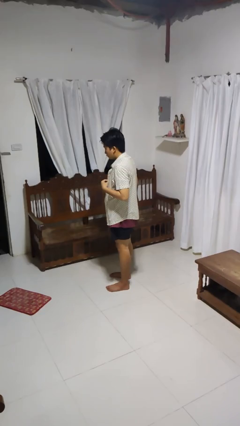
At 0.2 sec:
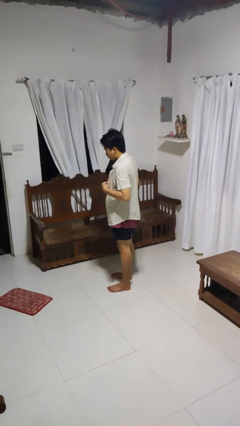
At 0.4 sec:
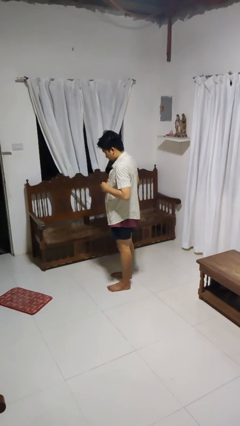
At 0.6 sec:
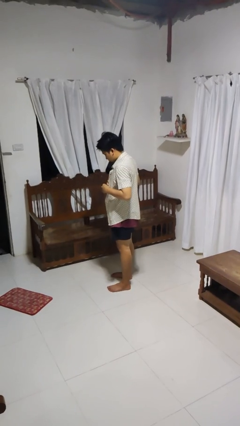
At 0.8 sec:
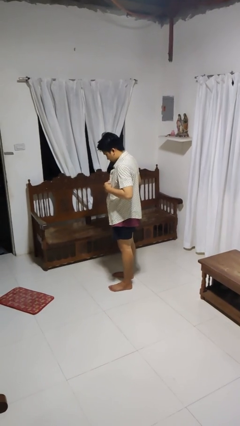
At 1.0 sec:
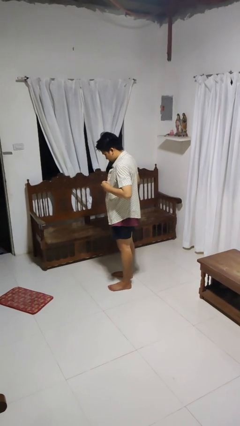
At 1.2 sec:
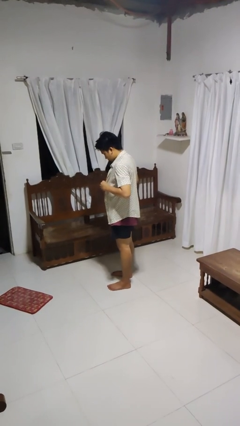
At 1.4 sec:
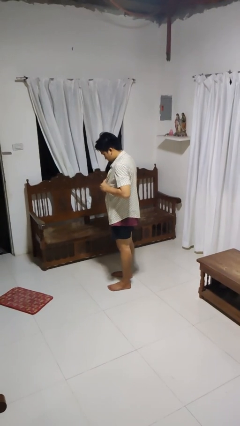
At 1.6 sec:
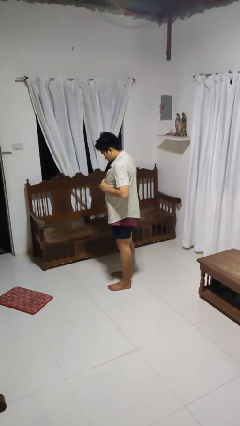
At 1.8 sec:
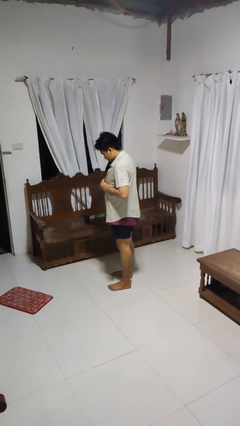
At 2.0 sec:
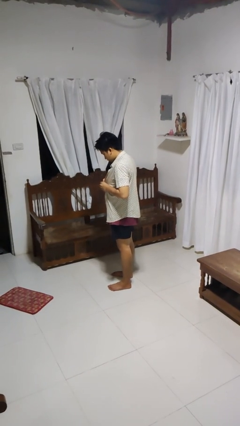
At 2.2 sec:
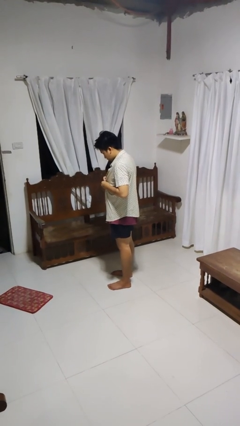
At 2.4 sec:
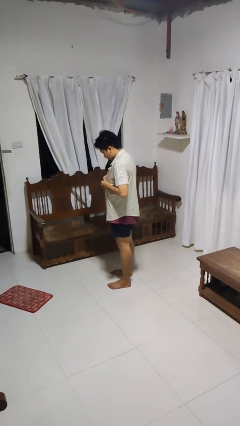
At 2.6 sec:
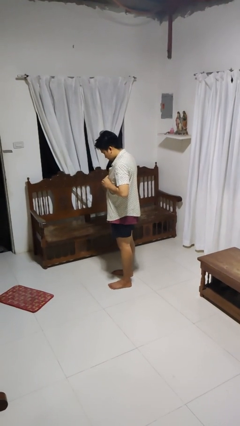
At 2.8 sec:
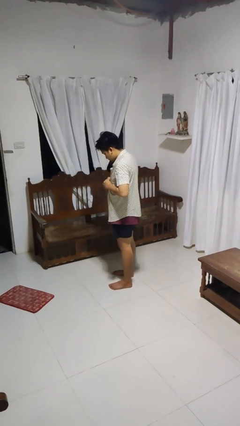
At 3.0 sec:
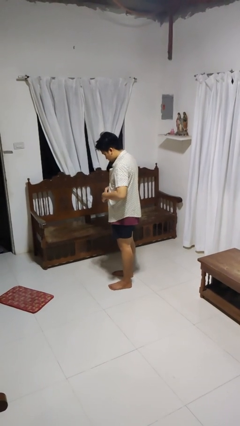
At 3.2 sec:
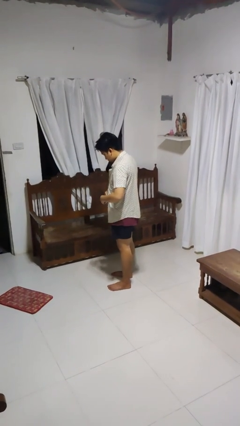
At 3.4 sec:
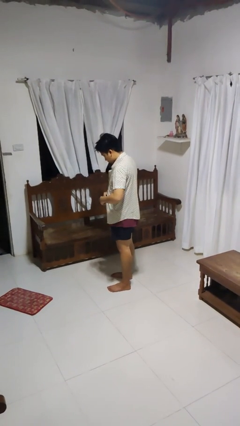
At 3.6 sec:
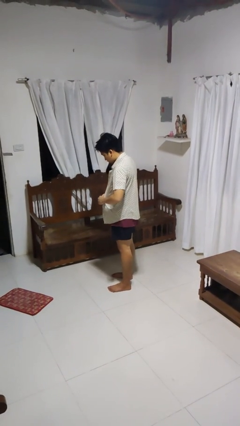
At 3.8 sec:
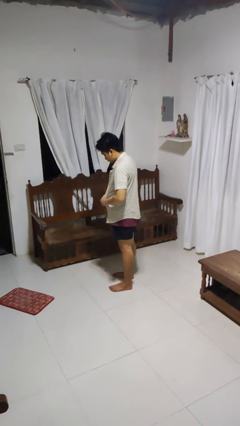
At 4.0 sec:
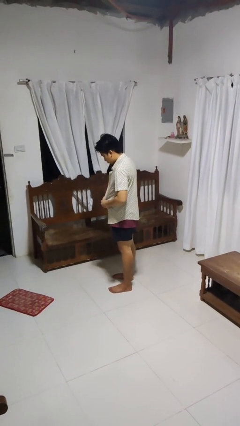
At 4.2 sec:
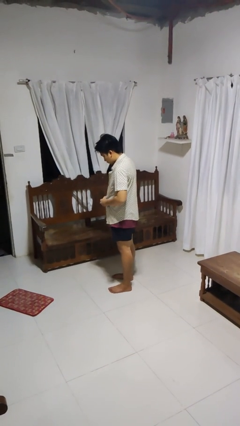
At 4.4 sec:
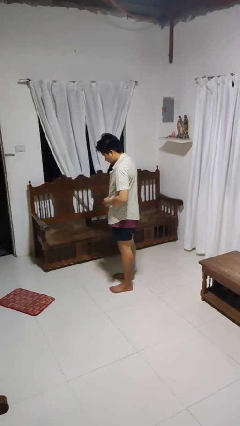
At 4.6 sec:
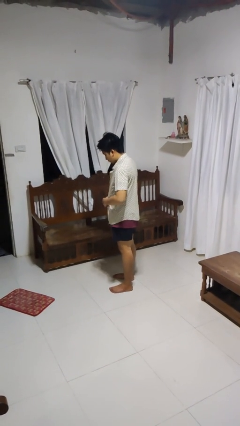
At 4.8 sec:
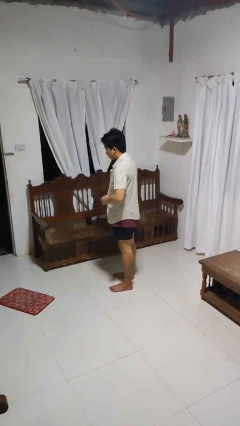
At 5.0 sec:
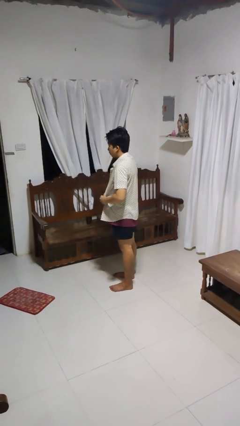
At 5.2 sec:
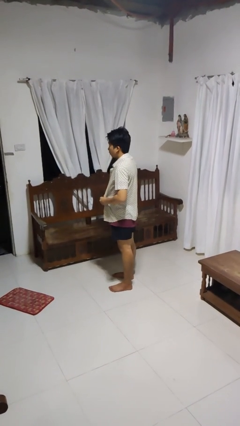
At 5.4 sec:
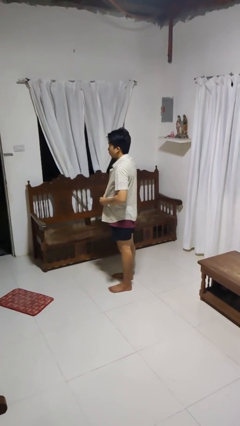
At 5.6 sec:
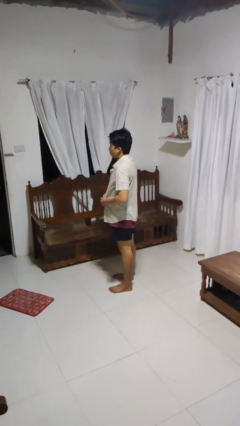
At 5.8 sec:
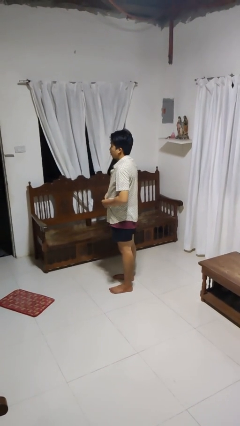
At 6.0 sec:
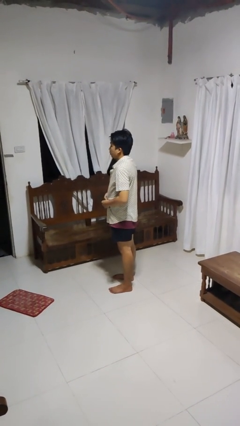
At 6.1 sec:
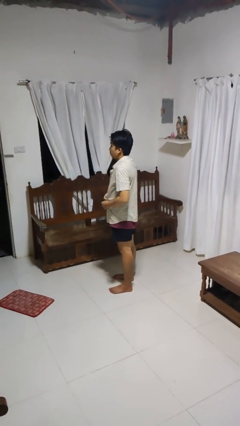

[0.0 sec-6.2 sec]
person buttons shirt

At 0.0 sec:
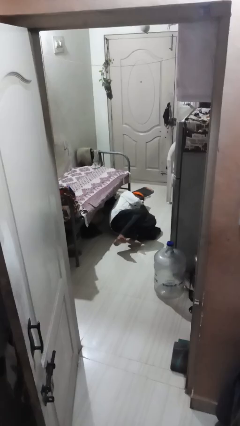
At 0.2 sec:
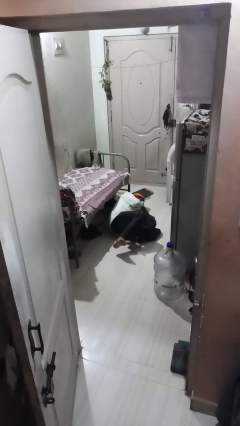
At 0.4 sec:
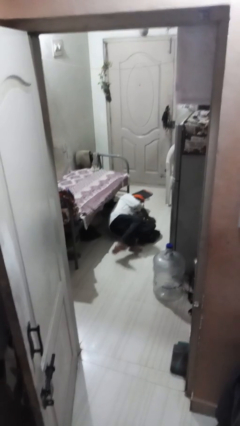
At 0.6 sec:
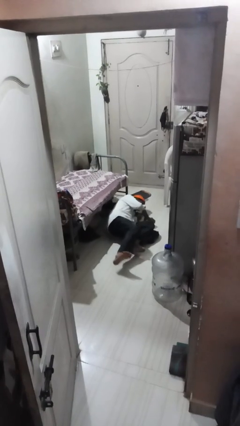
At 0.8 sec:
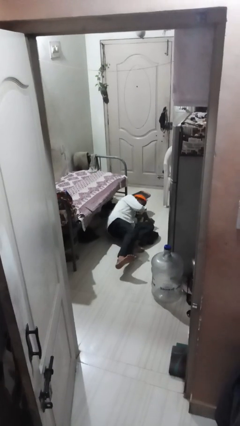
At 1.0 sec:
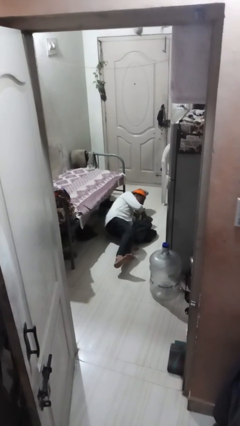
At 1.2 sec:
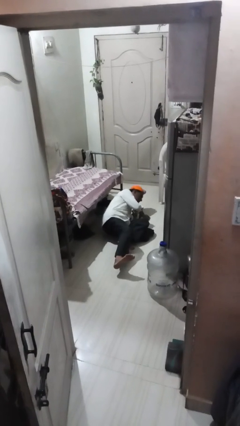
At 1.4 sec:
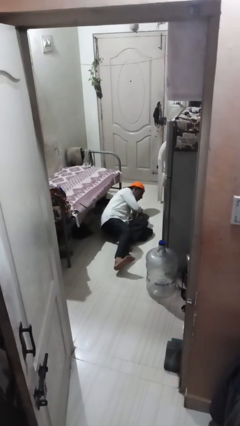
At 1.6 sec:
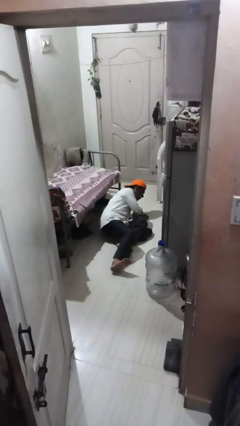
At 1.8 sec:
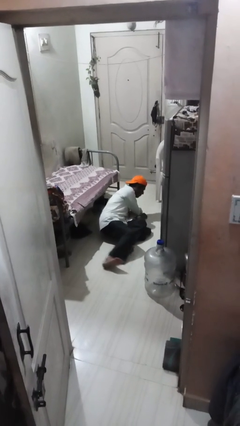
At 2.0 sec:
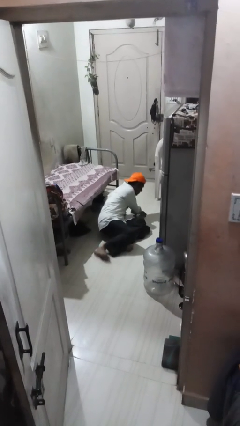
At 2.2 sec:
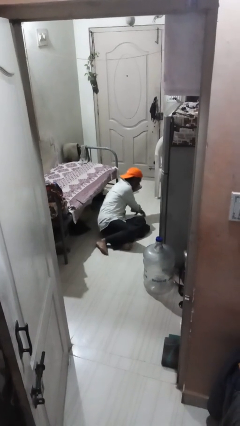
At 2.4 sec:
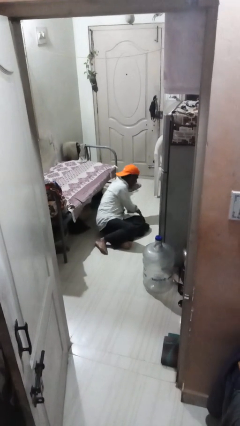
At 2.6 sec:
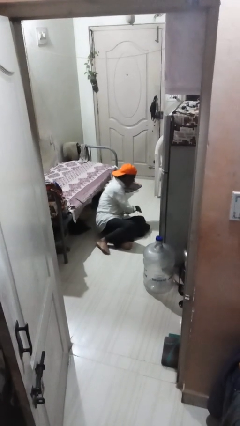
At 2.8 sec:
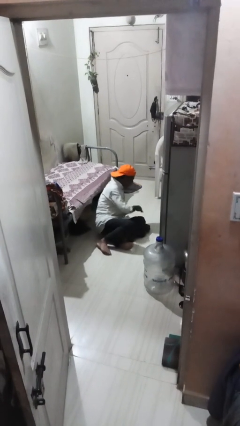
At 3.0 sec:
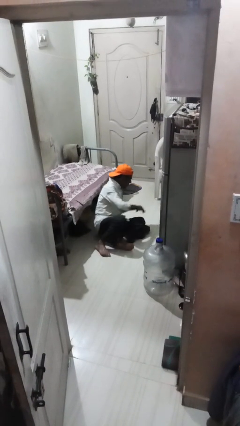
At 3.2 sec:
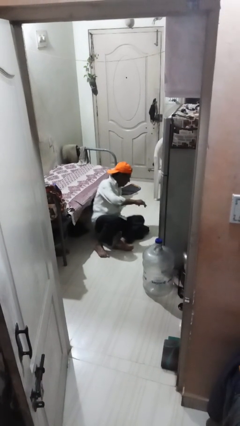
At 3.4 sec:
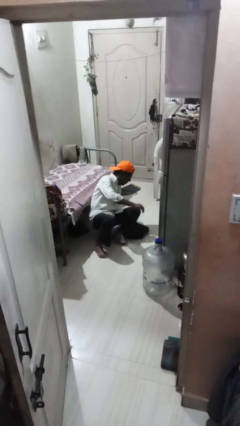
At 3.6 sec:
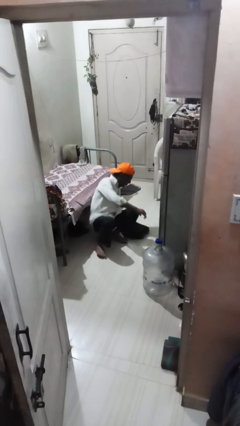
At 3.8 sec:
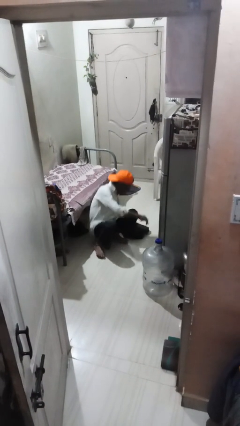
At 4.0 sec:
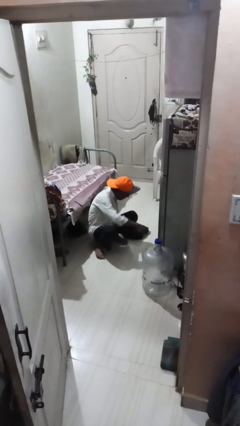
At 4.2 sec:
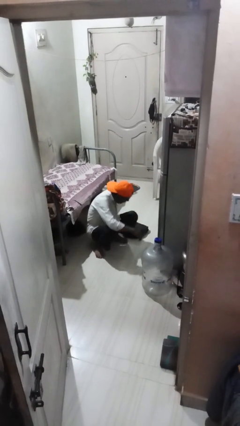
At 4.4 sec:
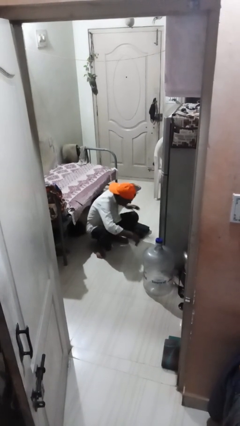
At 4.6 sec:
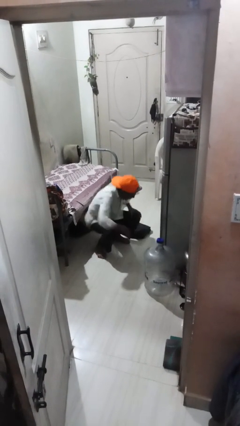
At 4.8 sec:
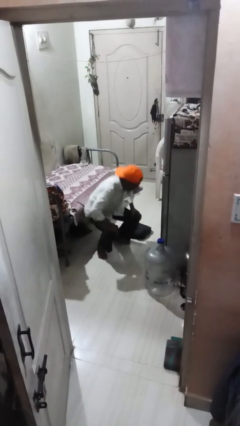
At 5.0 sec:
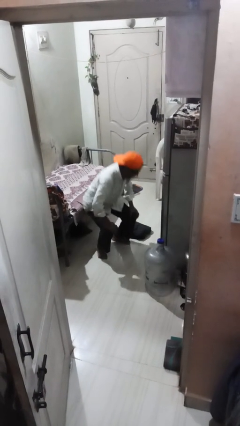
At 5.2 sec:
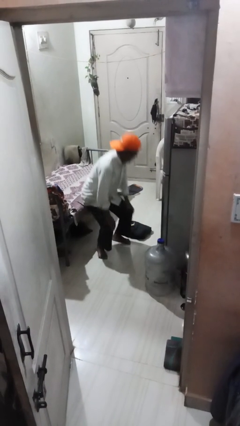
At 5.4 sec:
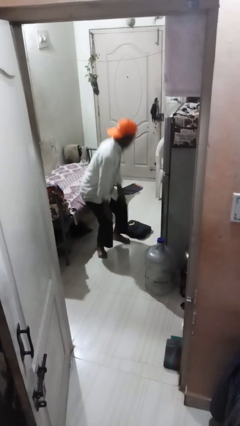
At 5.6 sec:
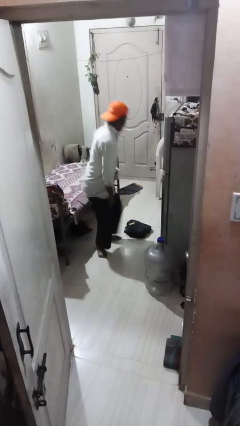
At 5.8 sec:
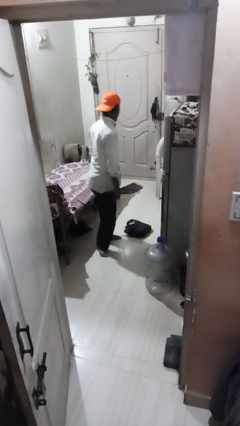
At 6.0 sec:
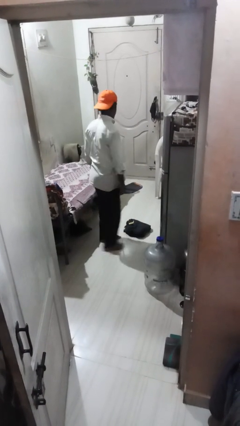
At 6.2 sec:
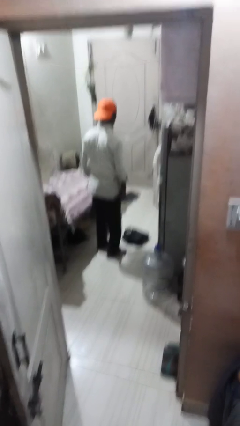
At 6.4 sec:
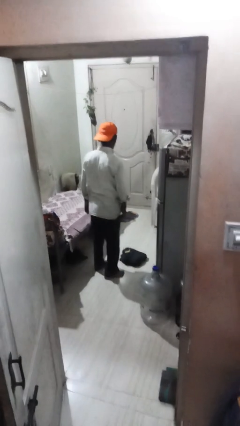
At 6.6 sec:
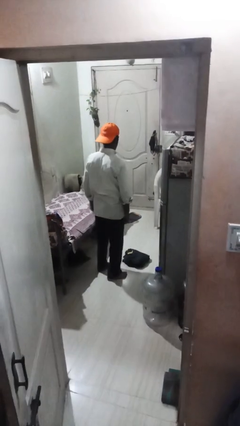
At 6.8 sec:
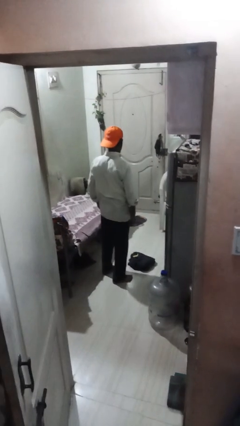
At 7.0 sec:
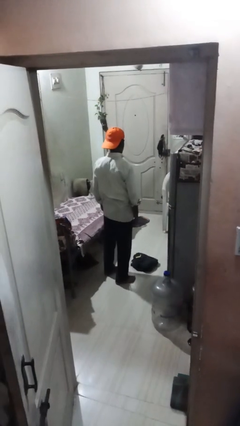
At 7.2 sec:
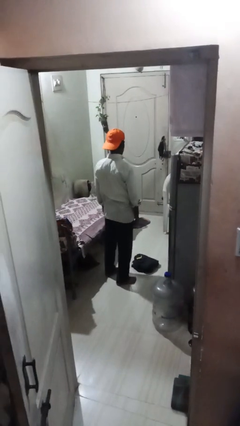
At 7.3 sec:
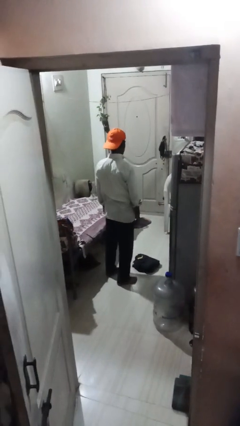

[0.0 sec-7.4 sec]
person stands up from floor

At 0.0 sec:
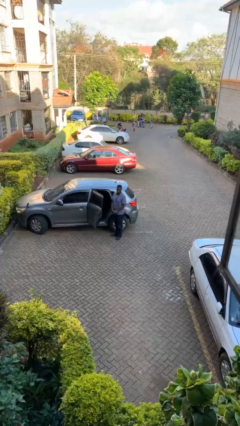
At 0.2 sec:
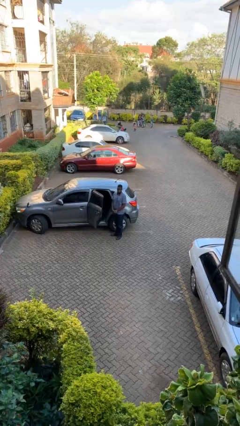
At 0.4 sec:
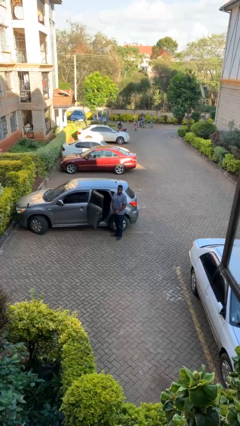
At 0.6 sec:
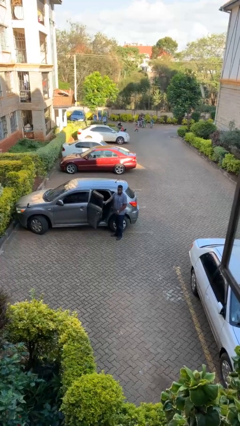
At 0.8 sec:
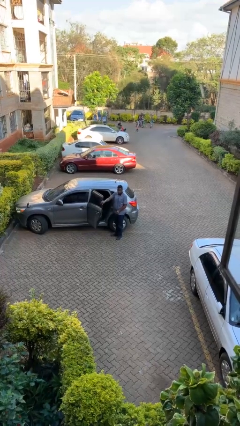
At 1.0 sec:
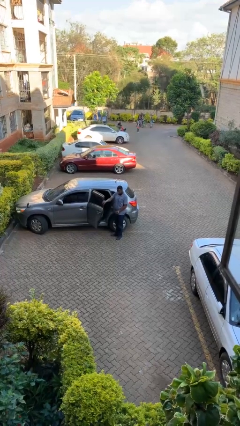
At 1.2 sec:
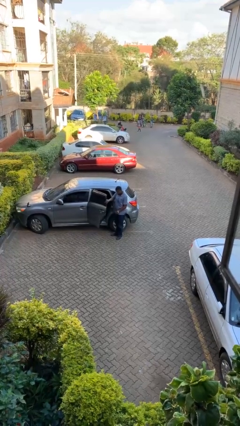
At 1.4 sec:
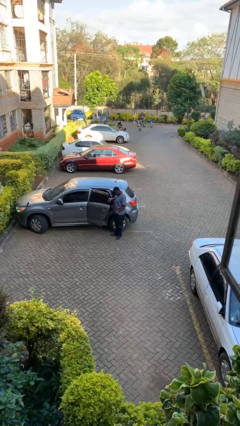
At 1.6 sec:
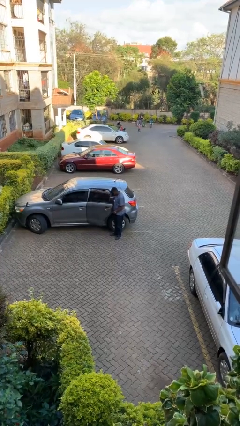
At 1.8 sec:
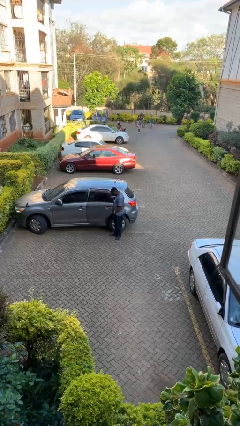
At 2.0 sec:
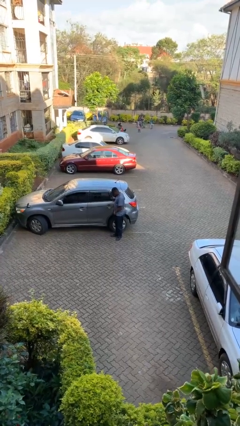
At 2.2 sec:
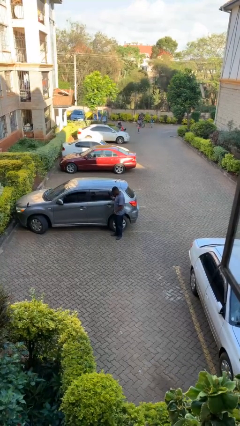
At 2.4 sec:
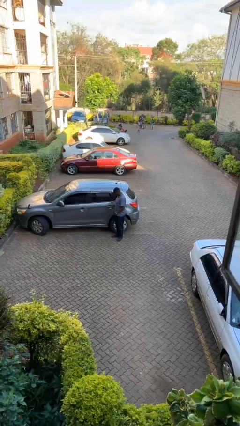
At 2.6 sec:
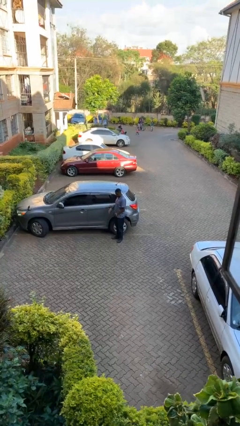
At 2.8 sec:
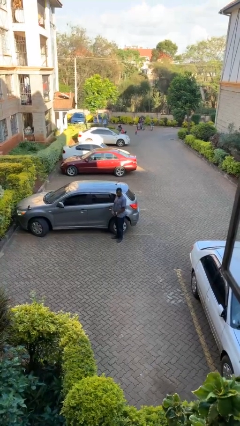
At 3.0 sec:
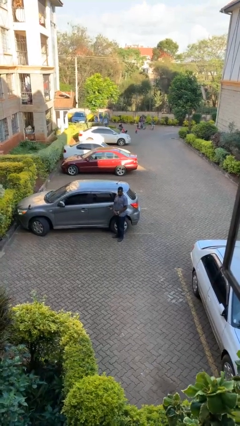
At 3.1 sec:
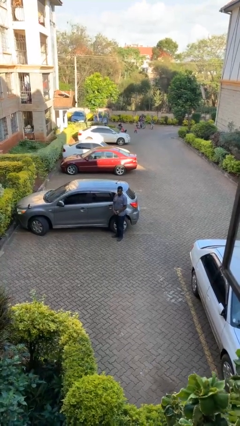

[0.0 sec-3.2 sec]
person closes car door

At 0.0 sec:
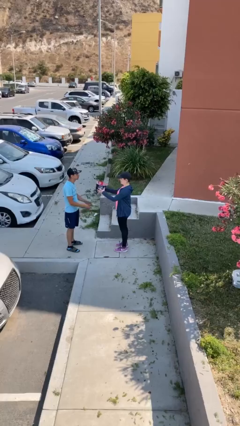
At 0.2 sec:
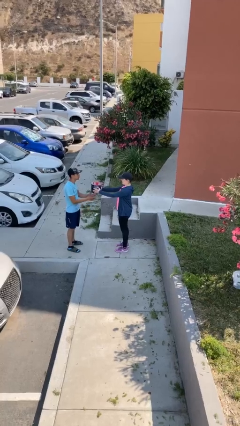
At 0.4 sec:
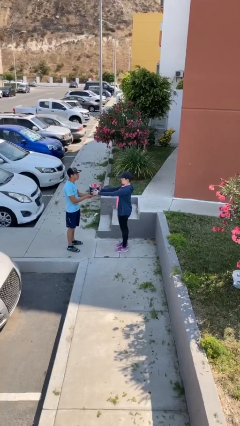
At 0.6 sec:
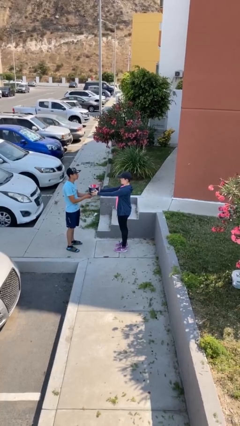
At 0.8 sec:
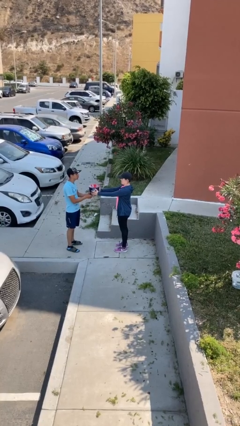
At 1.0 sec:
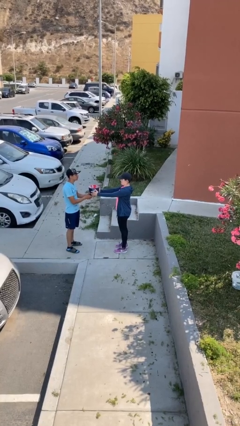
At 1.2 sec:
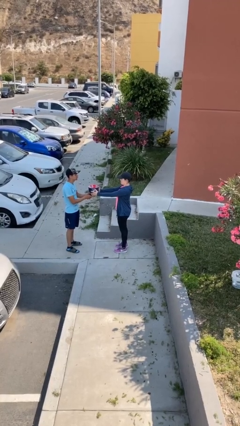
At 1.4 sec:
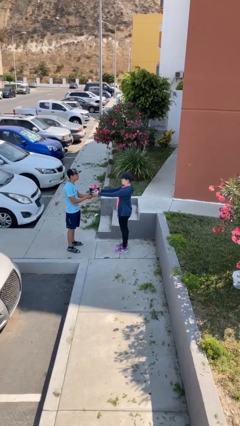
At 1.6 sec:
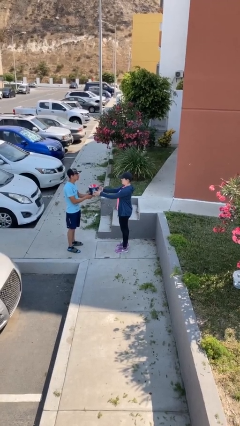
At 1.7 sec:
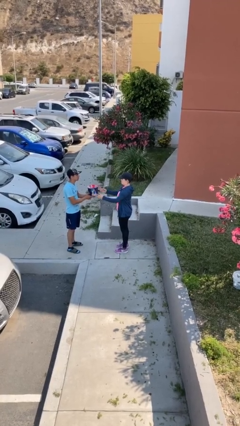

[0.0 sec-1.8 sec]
person transfers object to person
